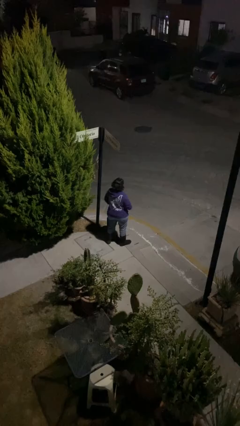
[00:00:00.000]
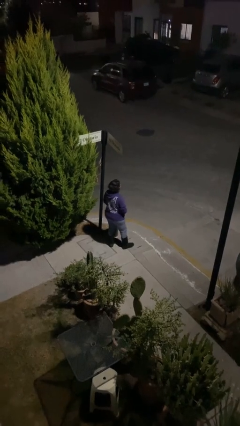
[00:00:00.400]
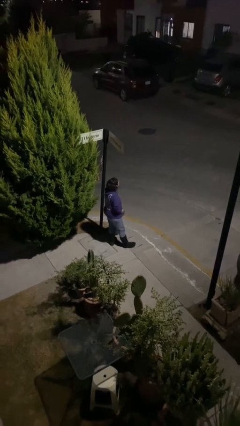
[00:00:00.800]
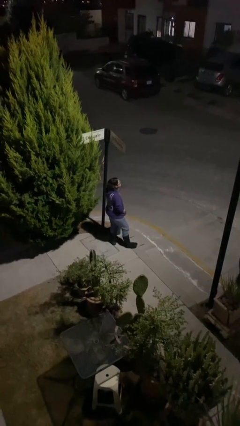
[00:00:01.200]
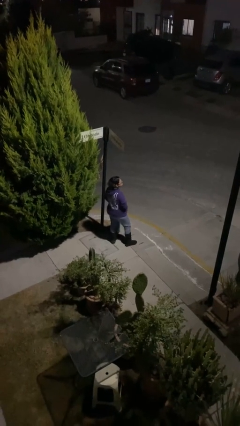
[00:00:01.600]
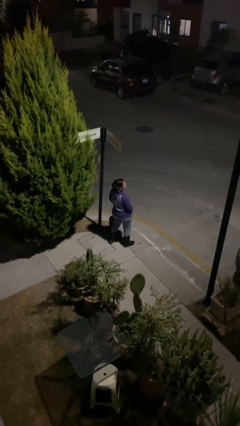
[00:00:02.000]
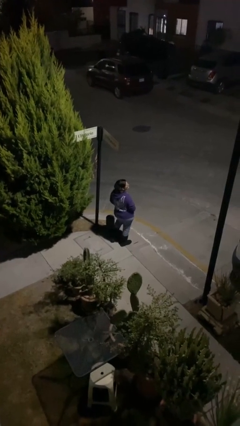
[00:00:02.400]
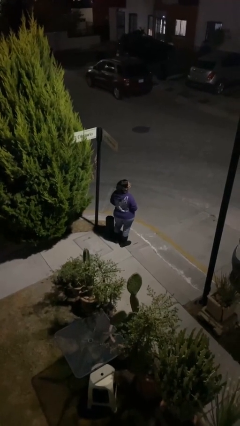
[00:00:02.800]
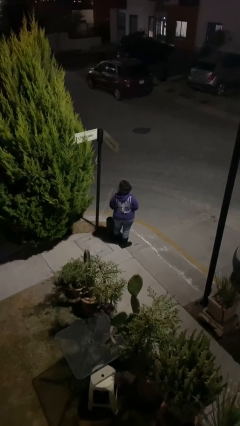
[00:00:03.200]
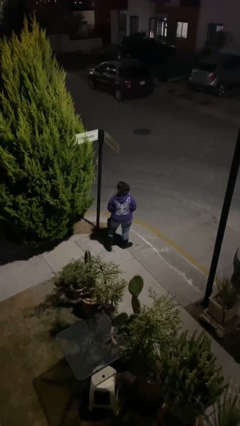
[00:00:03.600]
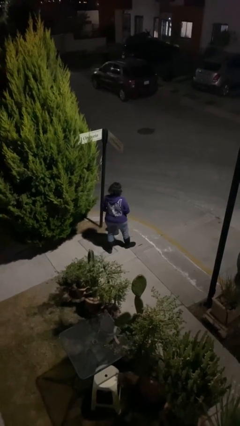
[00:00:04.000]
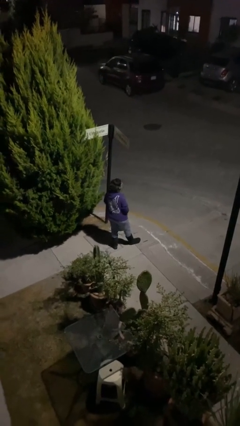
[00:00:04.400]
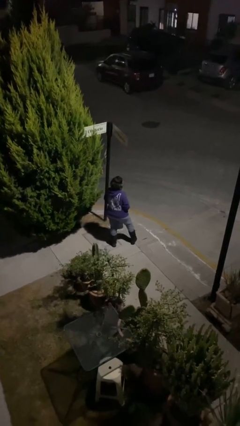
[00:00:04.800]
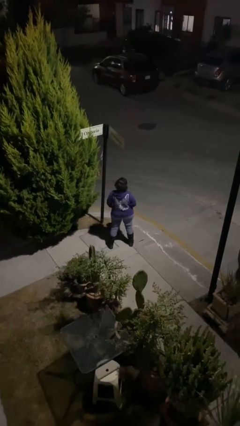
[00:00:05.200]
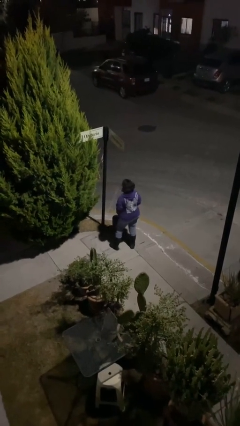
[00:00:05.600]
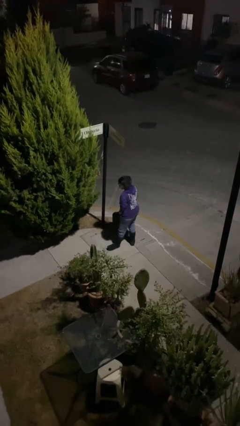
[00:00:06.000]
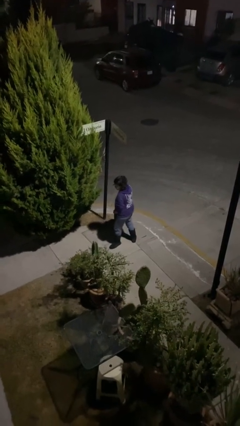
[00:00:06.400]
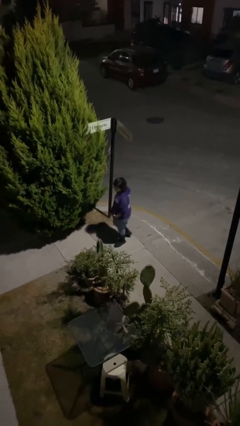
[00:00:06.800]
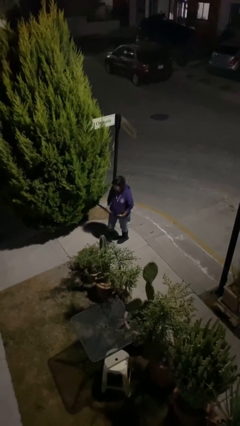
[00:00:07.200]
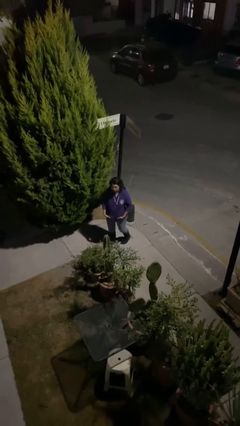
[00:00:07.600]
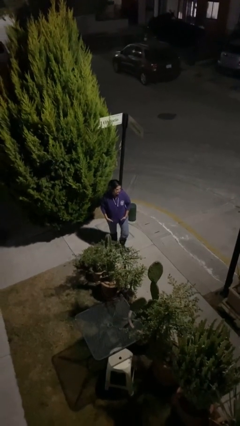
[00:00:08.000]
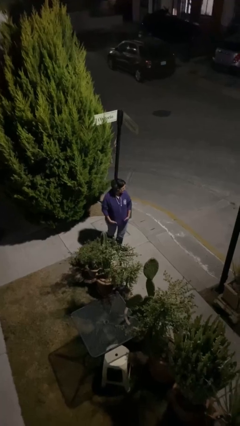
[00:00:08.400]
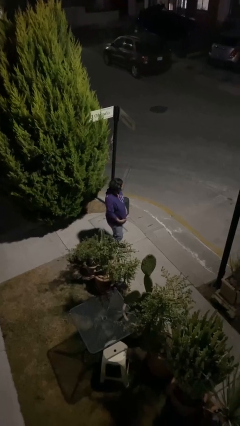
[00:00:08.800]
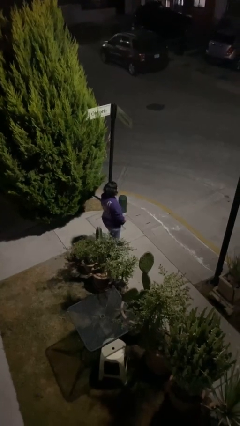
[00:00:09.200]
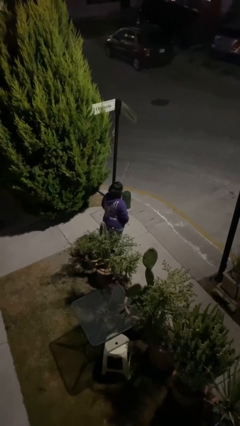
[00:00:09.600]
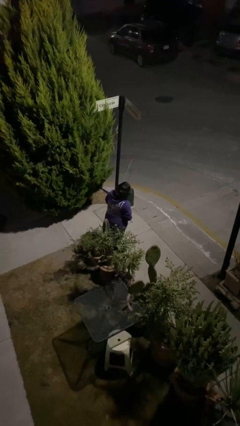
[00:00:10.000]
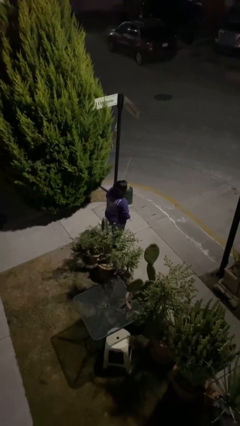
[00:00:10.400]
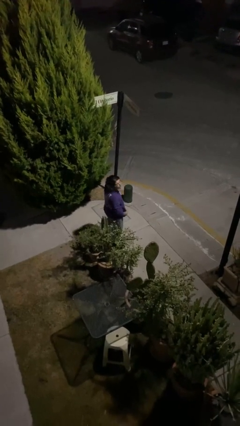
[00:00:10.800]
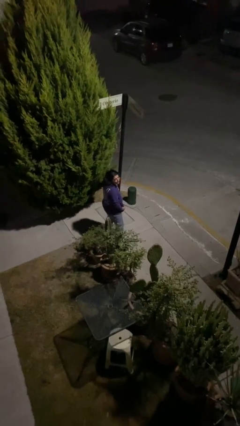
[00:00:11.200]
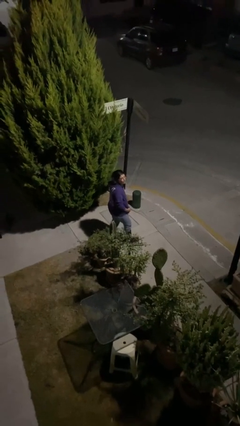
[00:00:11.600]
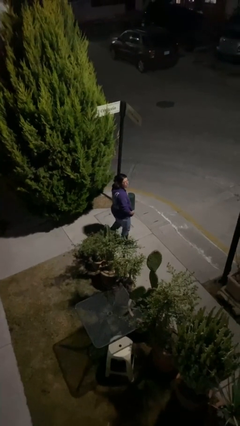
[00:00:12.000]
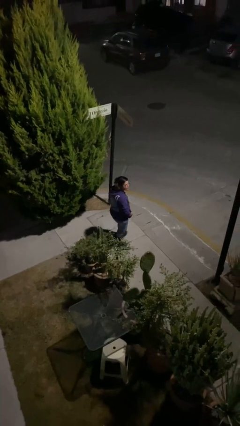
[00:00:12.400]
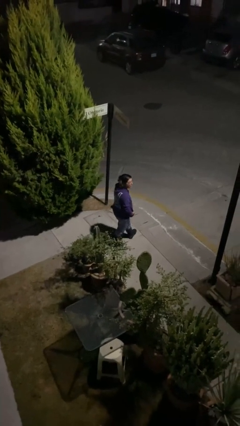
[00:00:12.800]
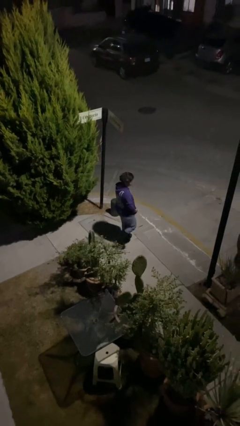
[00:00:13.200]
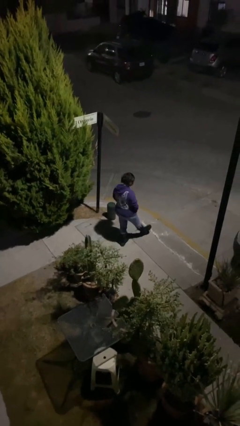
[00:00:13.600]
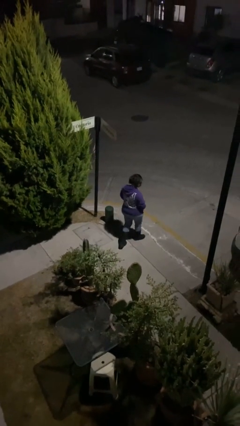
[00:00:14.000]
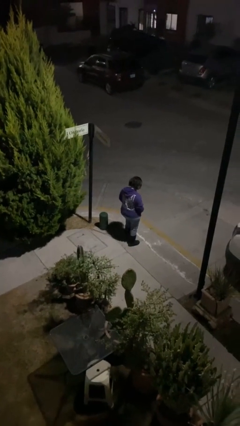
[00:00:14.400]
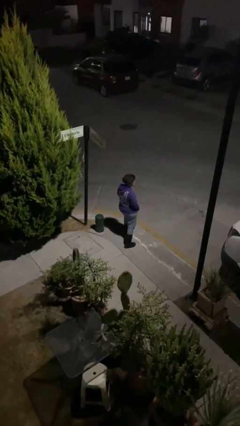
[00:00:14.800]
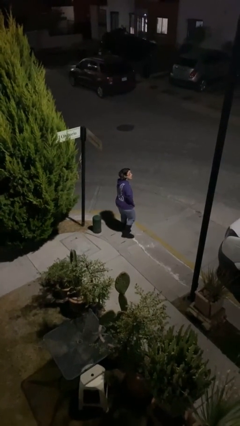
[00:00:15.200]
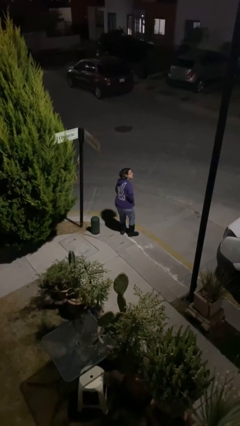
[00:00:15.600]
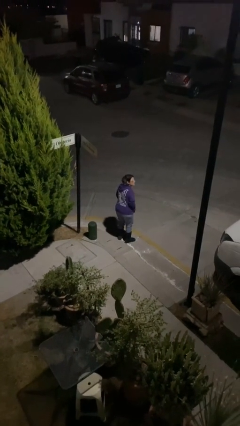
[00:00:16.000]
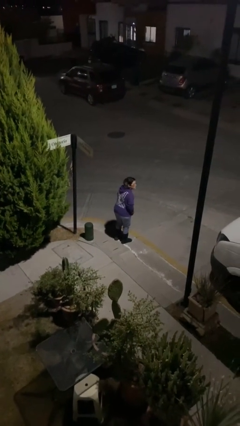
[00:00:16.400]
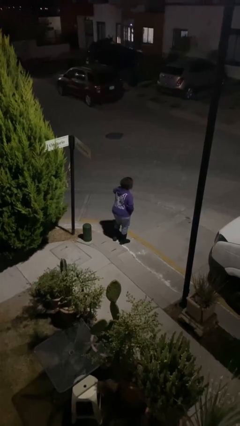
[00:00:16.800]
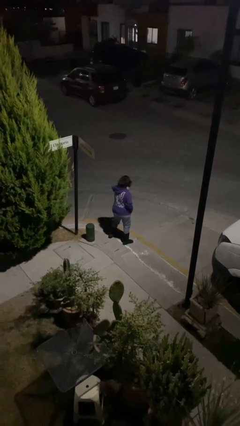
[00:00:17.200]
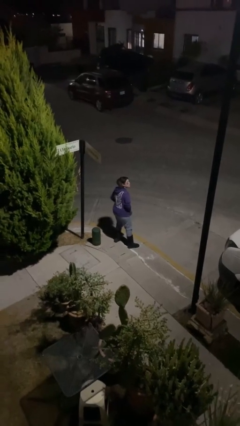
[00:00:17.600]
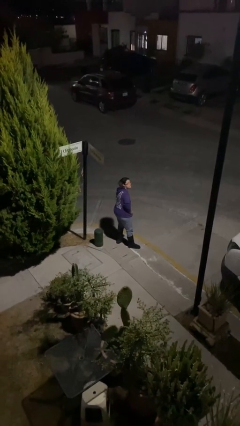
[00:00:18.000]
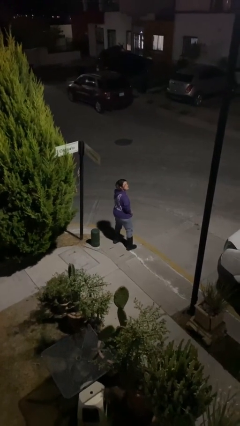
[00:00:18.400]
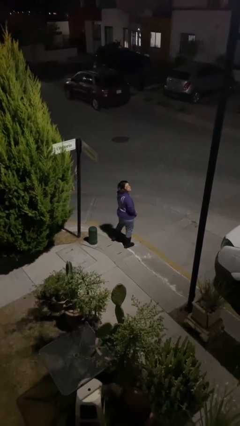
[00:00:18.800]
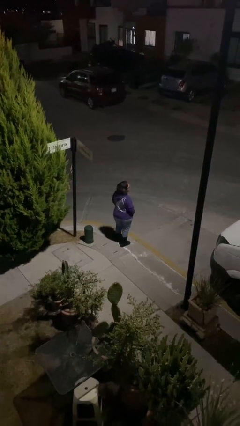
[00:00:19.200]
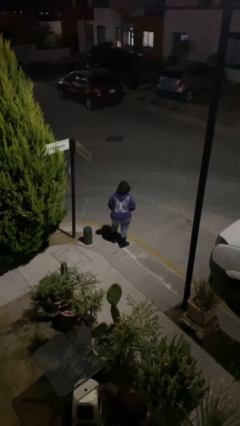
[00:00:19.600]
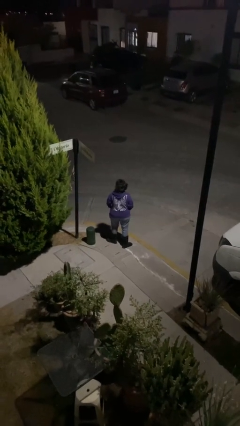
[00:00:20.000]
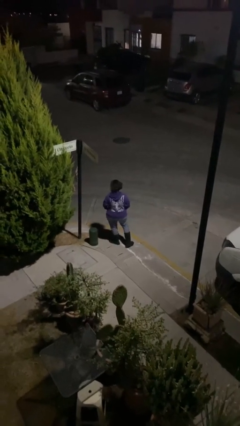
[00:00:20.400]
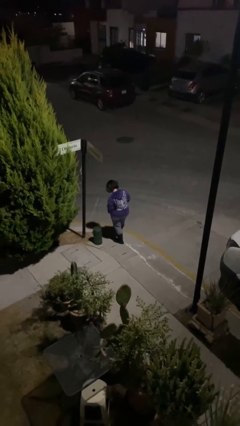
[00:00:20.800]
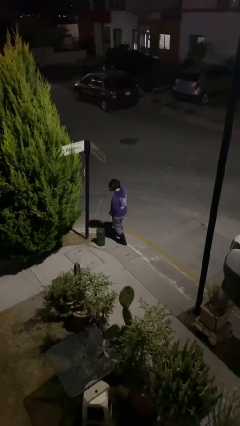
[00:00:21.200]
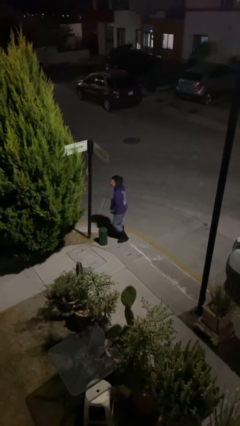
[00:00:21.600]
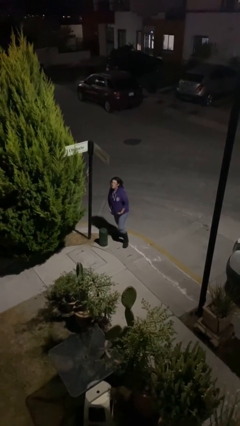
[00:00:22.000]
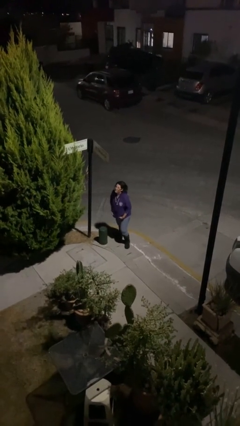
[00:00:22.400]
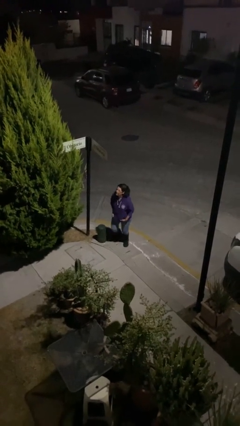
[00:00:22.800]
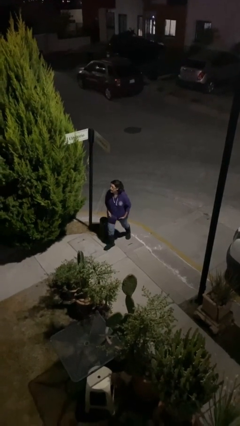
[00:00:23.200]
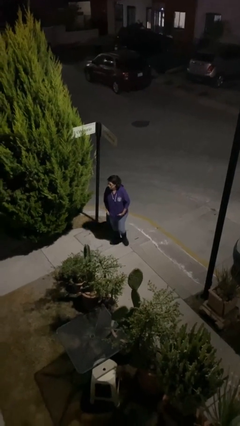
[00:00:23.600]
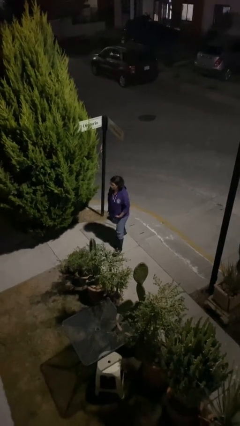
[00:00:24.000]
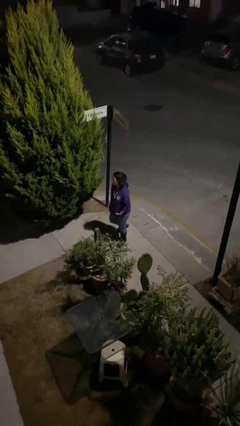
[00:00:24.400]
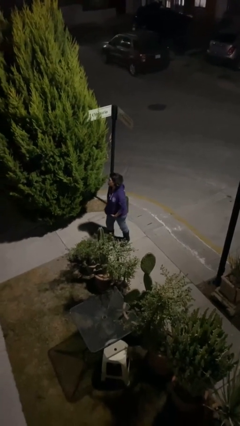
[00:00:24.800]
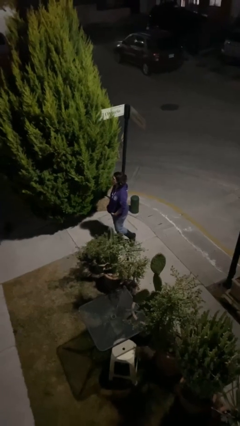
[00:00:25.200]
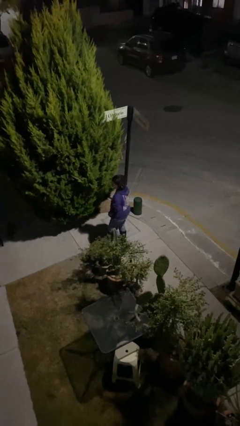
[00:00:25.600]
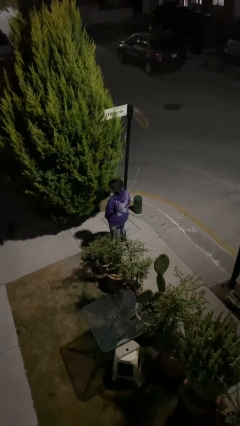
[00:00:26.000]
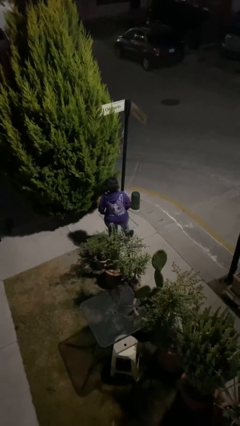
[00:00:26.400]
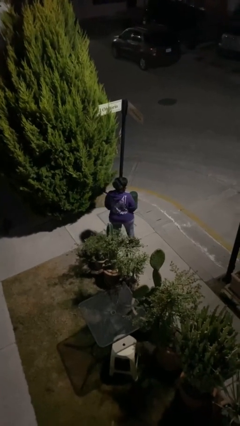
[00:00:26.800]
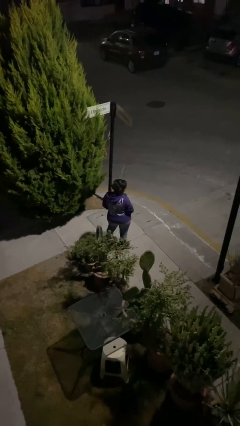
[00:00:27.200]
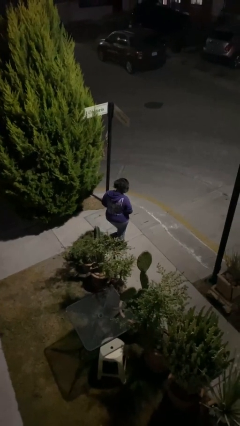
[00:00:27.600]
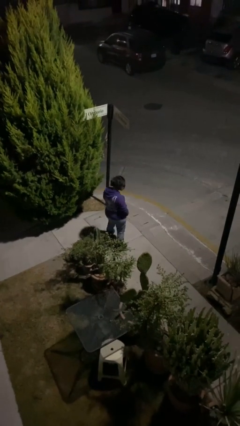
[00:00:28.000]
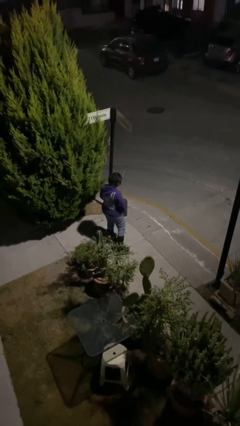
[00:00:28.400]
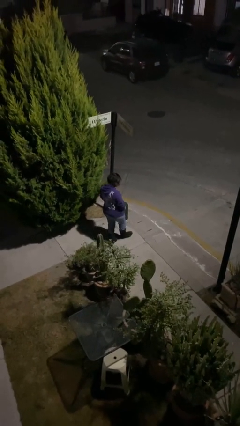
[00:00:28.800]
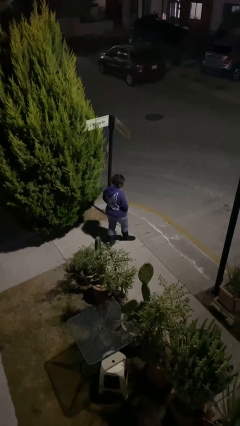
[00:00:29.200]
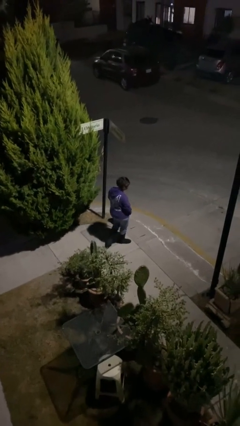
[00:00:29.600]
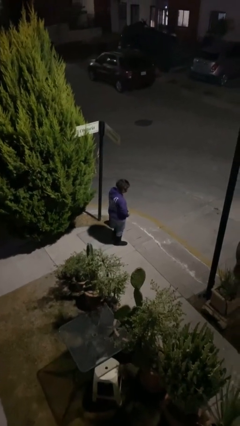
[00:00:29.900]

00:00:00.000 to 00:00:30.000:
person walks

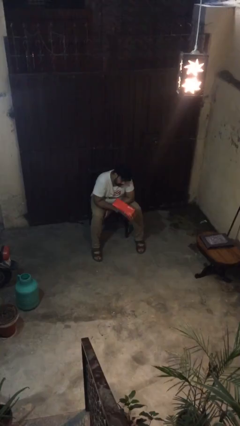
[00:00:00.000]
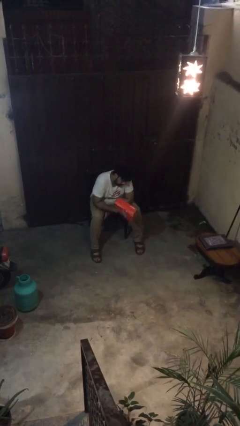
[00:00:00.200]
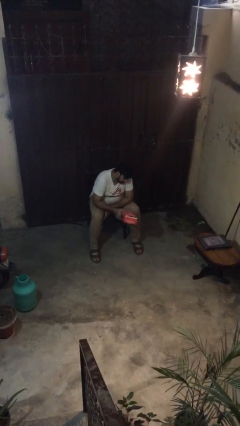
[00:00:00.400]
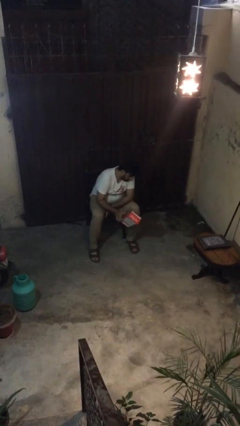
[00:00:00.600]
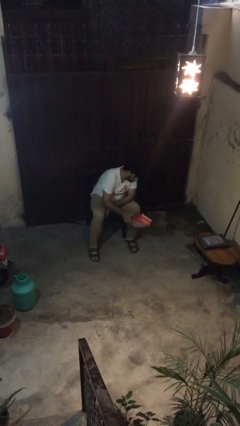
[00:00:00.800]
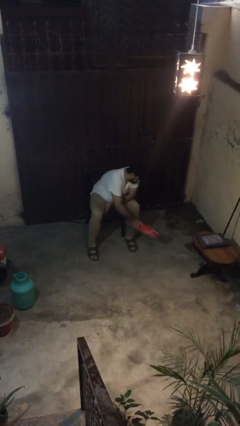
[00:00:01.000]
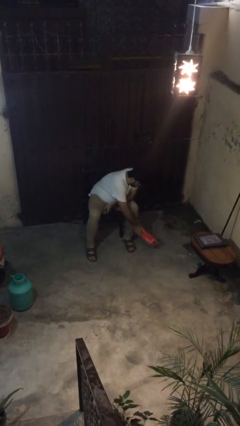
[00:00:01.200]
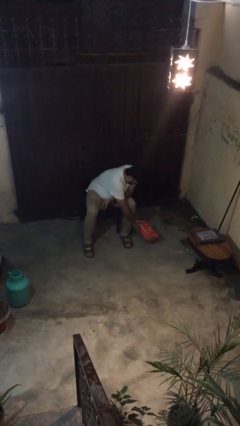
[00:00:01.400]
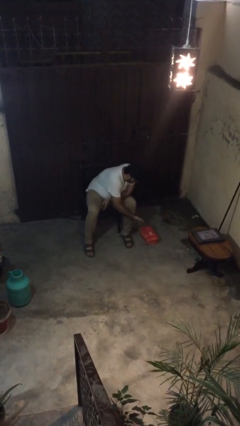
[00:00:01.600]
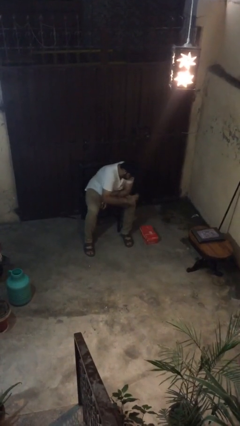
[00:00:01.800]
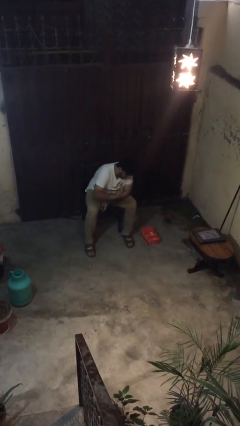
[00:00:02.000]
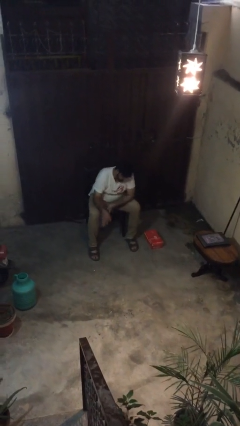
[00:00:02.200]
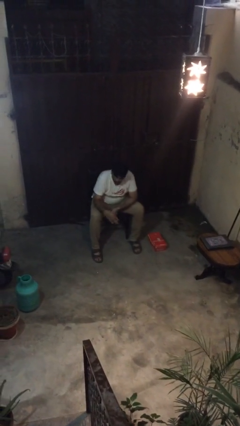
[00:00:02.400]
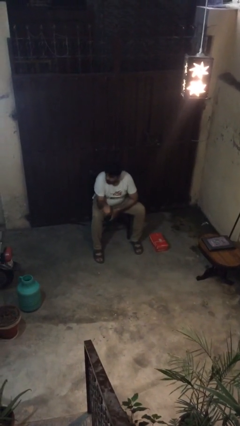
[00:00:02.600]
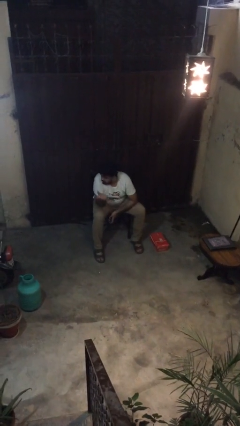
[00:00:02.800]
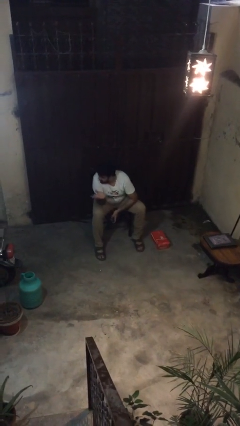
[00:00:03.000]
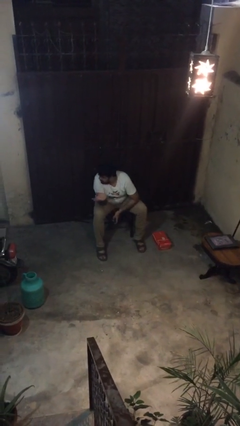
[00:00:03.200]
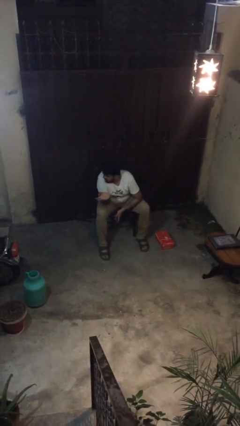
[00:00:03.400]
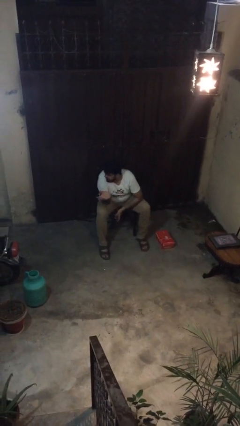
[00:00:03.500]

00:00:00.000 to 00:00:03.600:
person puts down object on floor
